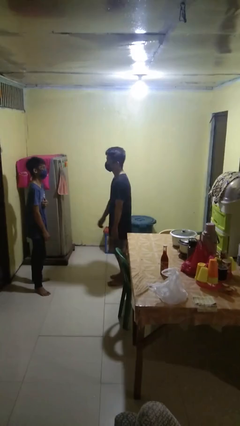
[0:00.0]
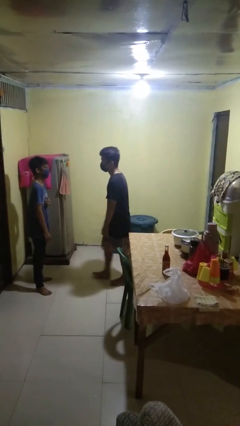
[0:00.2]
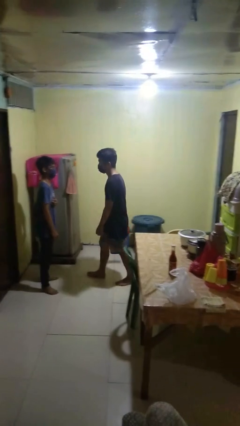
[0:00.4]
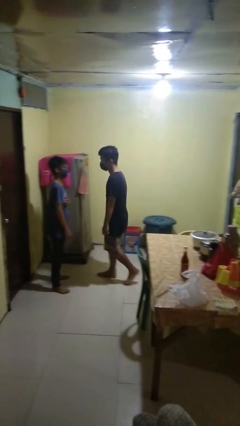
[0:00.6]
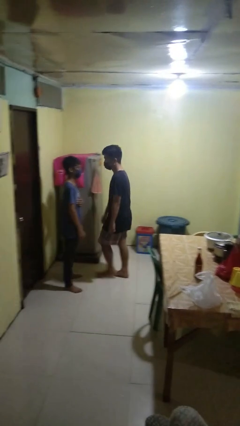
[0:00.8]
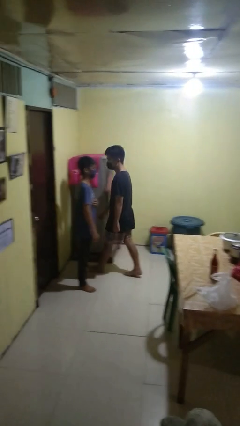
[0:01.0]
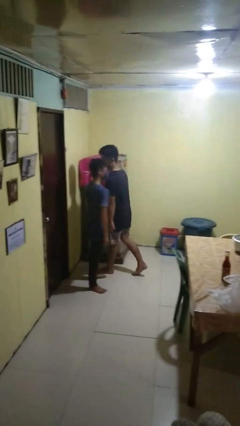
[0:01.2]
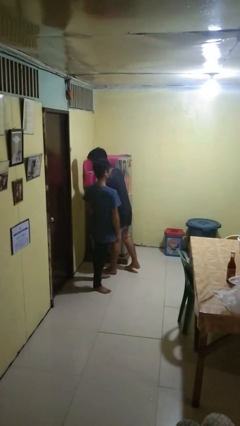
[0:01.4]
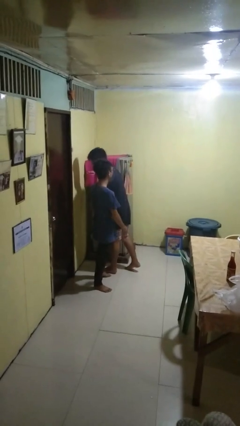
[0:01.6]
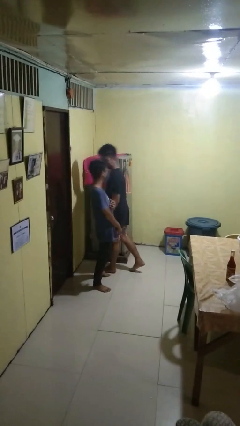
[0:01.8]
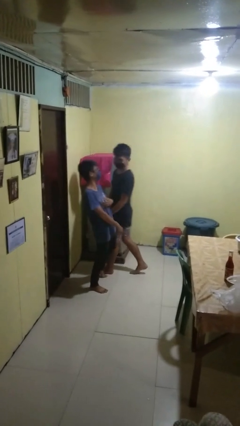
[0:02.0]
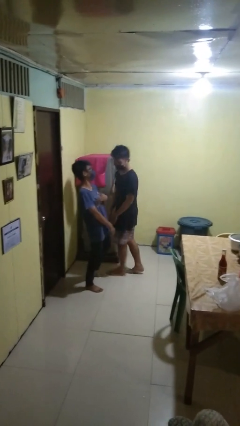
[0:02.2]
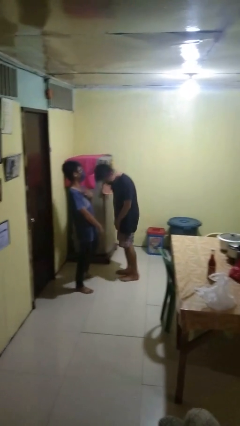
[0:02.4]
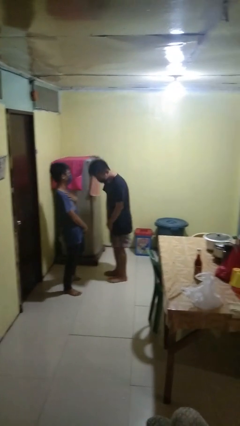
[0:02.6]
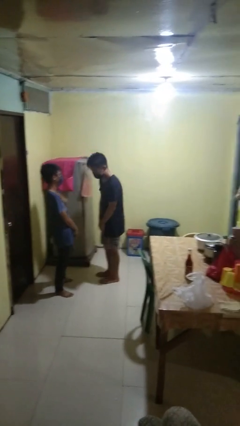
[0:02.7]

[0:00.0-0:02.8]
person bumps into person

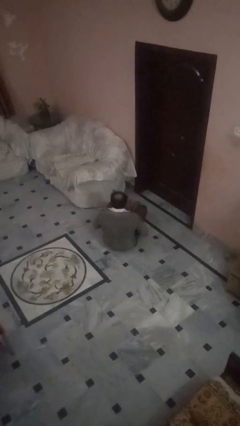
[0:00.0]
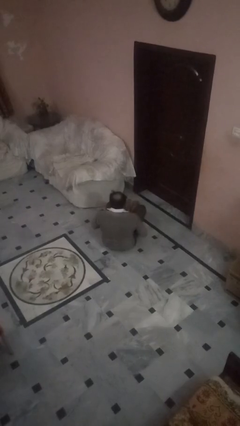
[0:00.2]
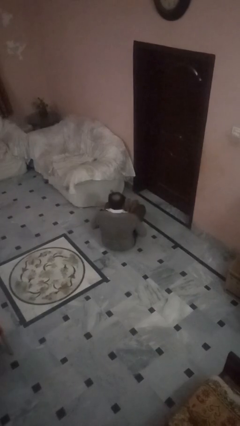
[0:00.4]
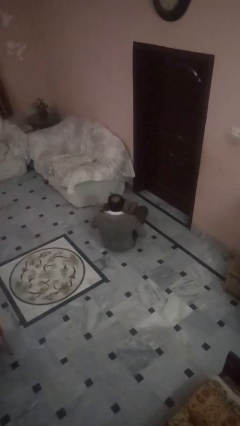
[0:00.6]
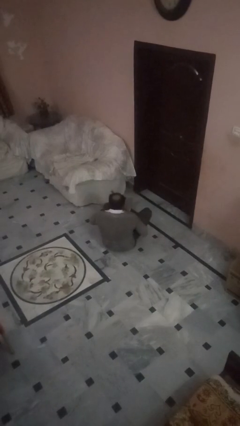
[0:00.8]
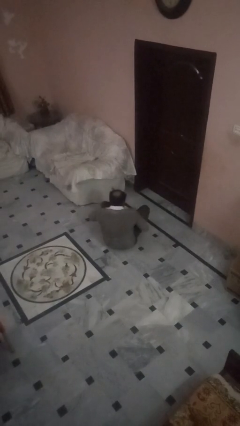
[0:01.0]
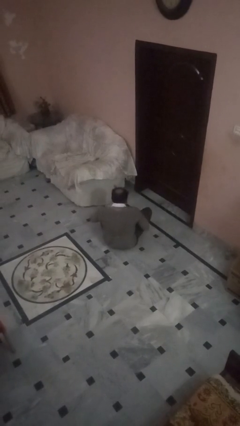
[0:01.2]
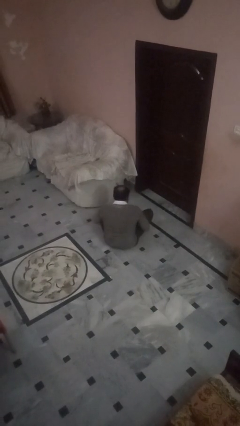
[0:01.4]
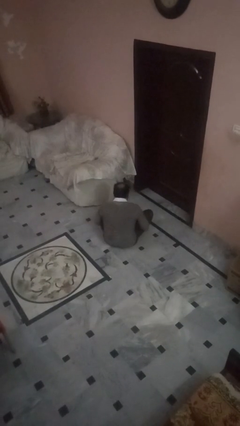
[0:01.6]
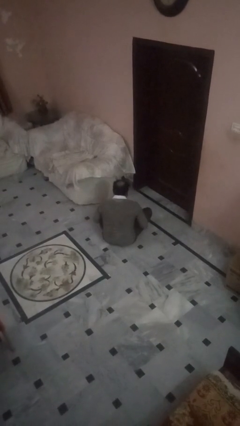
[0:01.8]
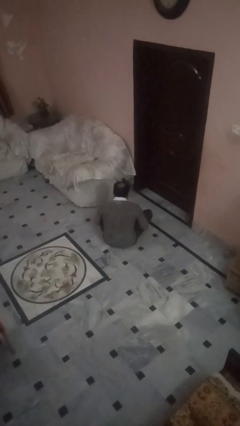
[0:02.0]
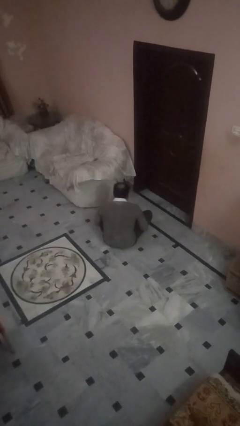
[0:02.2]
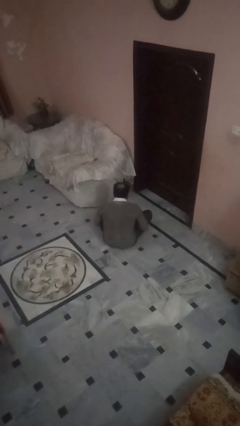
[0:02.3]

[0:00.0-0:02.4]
person crosses legs

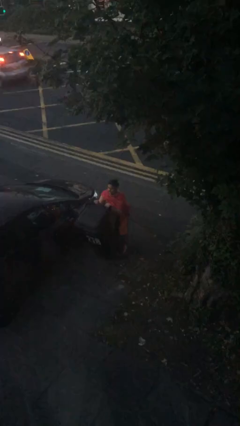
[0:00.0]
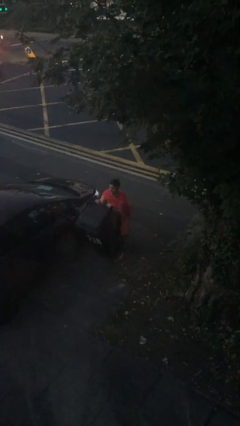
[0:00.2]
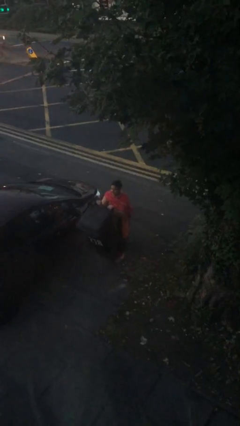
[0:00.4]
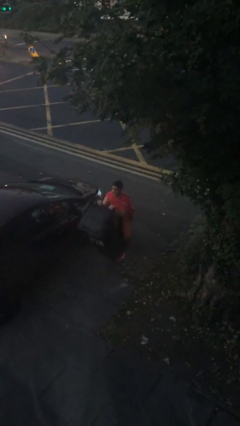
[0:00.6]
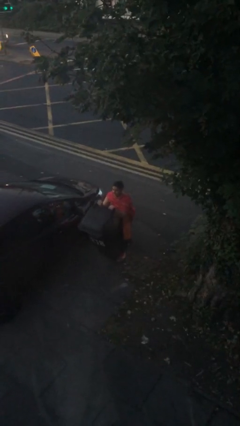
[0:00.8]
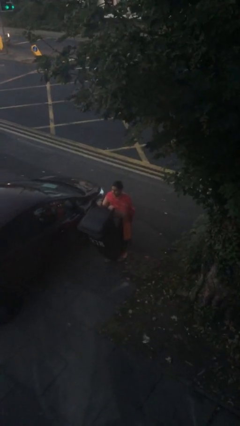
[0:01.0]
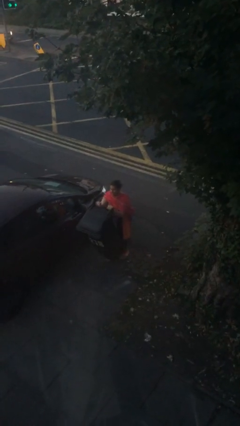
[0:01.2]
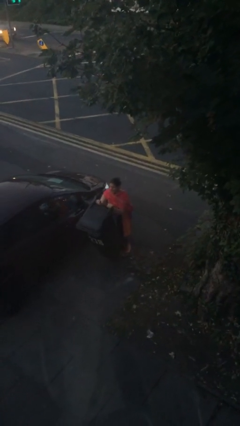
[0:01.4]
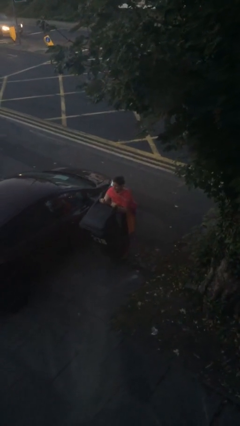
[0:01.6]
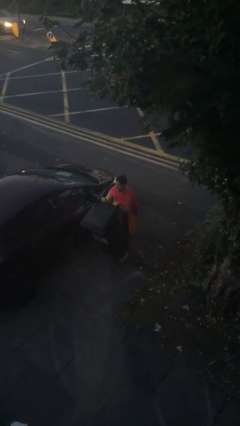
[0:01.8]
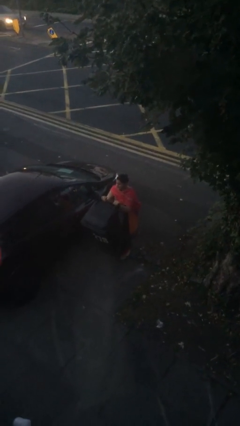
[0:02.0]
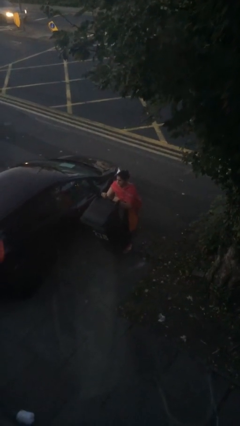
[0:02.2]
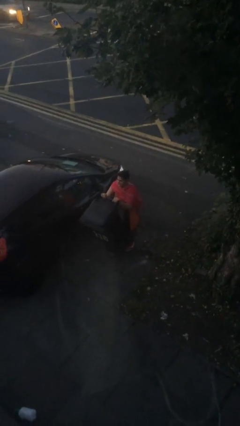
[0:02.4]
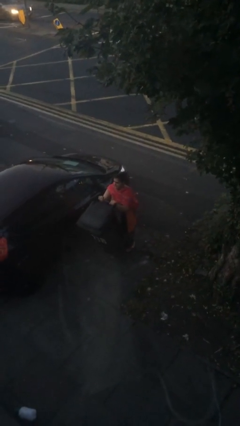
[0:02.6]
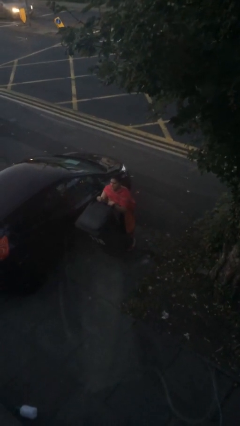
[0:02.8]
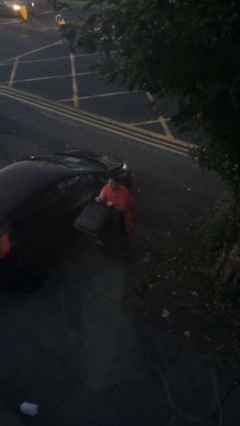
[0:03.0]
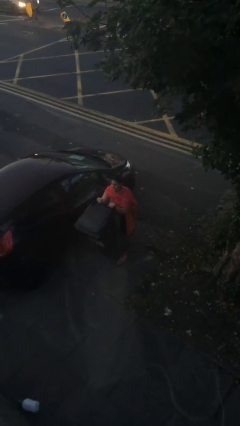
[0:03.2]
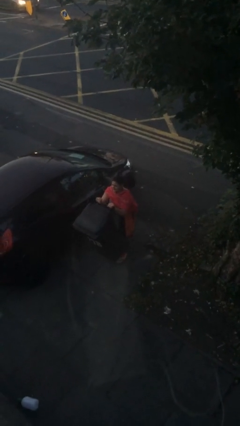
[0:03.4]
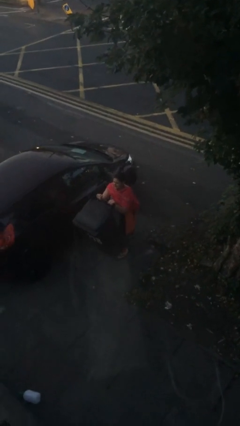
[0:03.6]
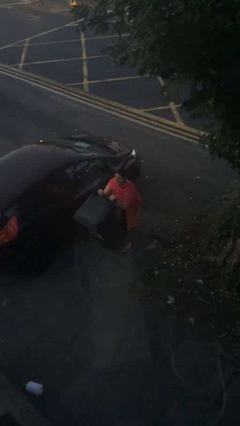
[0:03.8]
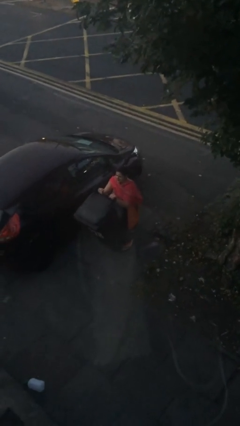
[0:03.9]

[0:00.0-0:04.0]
person carries heavy object

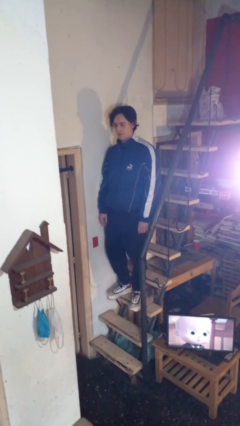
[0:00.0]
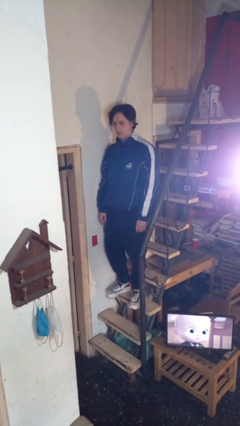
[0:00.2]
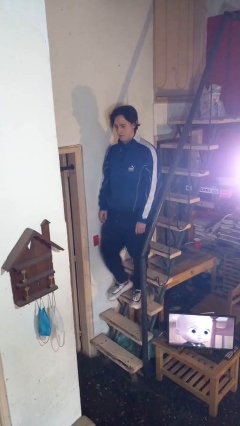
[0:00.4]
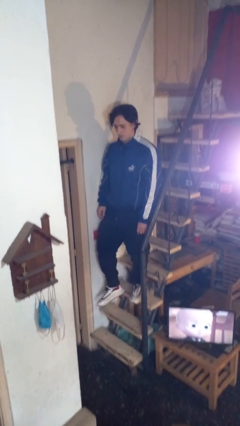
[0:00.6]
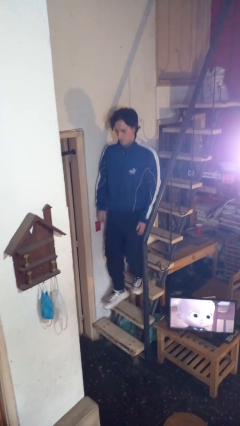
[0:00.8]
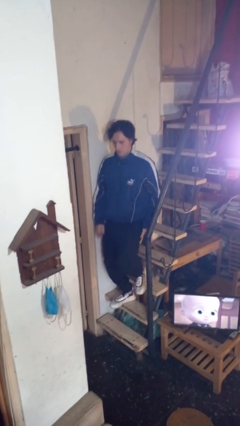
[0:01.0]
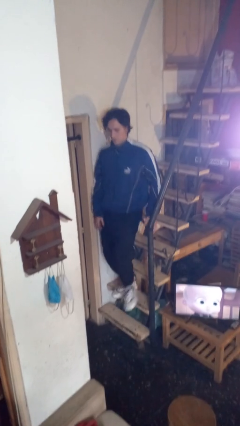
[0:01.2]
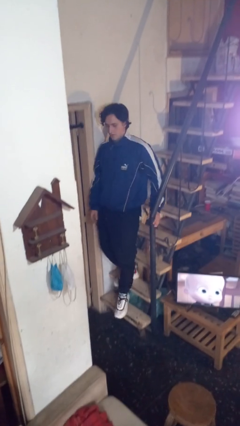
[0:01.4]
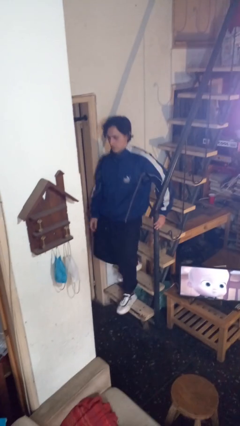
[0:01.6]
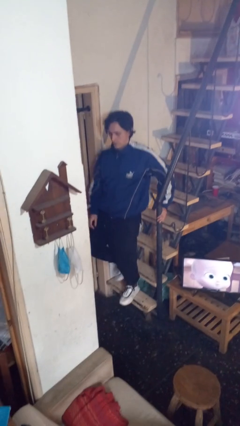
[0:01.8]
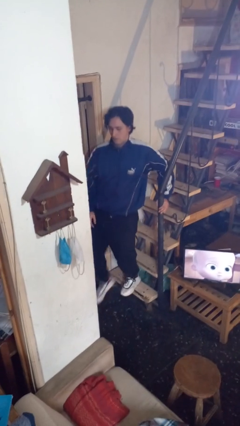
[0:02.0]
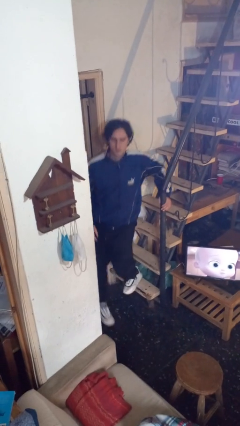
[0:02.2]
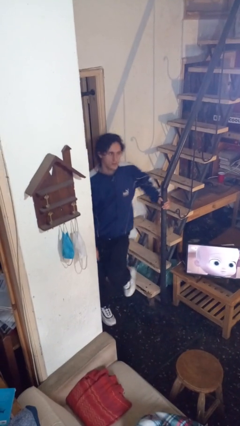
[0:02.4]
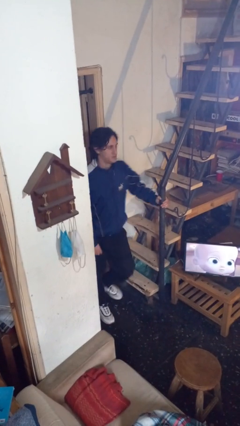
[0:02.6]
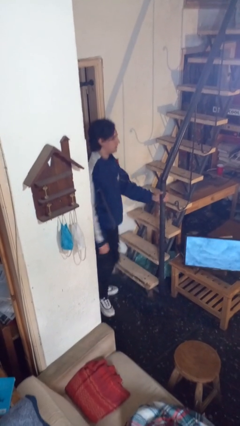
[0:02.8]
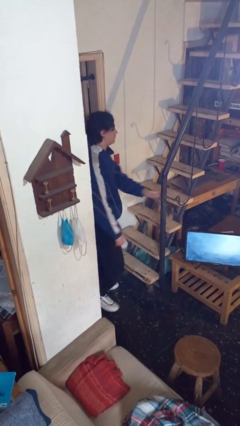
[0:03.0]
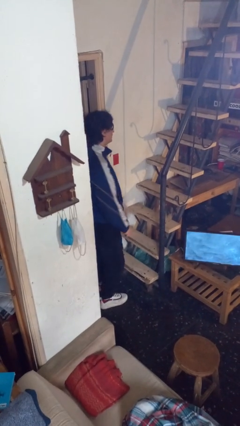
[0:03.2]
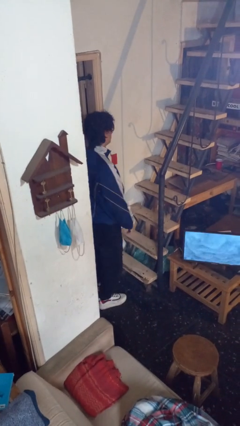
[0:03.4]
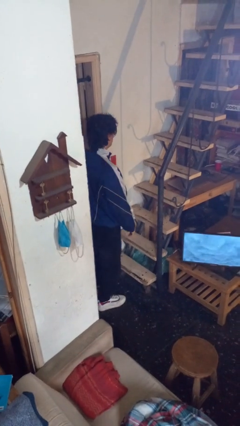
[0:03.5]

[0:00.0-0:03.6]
person climbs down stairs

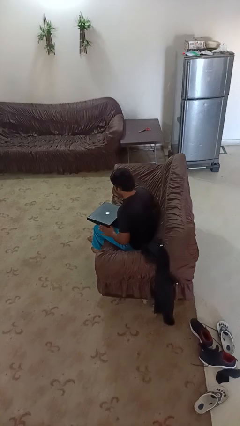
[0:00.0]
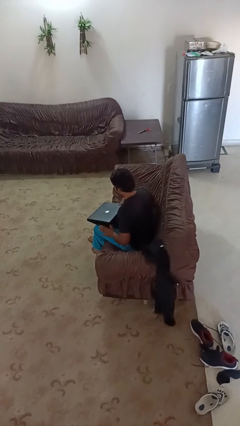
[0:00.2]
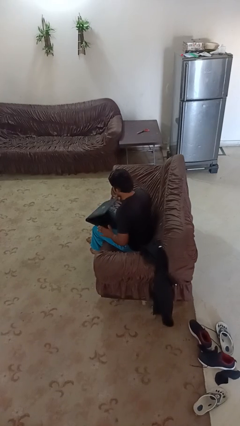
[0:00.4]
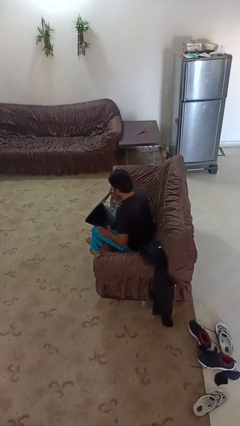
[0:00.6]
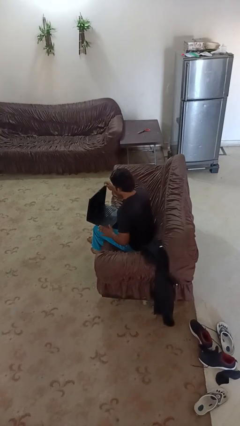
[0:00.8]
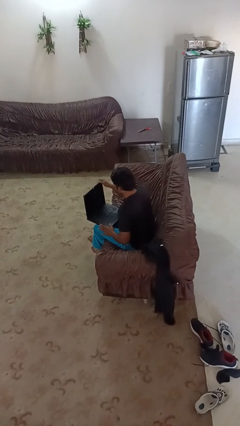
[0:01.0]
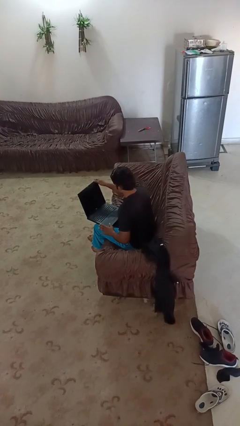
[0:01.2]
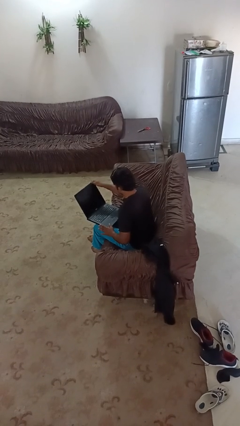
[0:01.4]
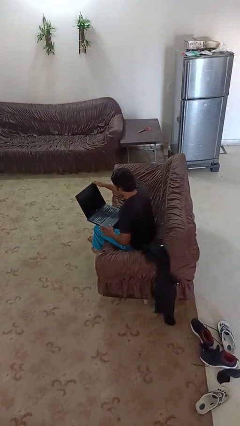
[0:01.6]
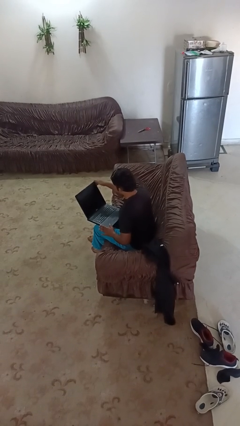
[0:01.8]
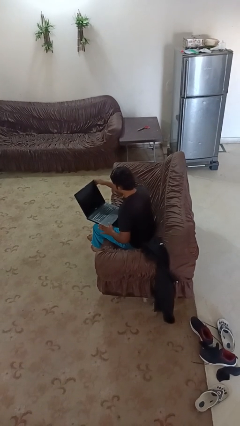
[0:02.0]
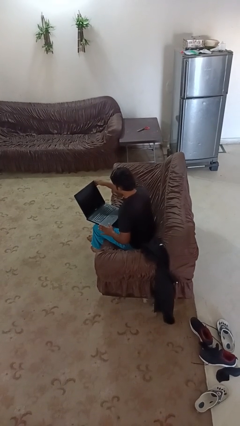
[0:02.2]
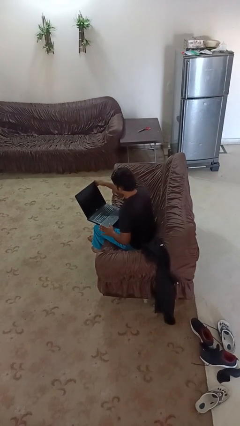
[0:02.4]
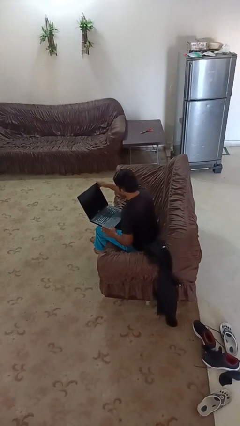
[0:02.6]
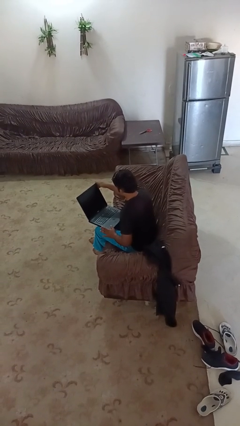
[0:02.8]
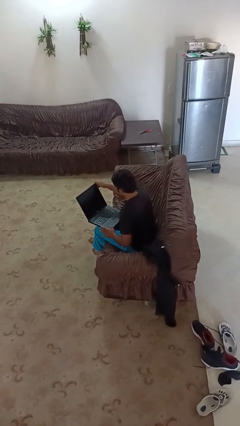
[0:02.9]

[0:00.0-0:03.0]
person opens laptop

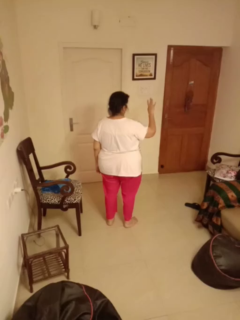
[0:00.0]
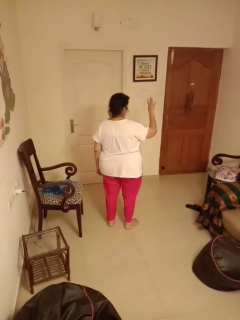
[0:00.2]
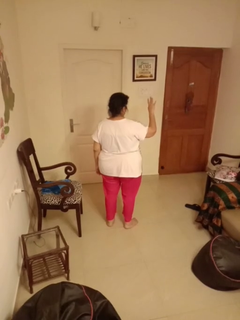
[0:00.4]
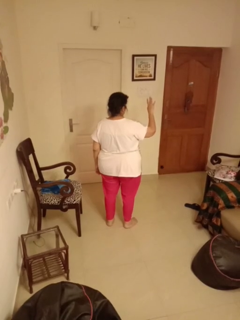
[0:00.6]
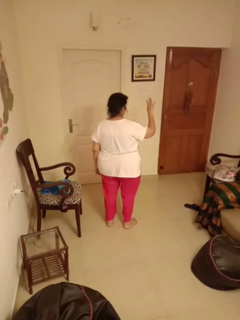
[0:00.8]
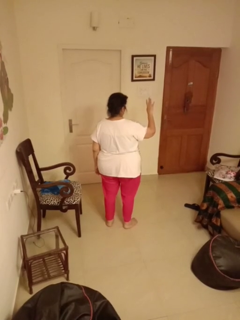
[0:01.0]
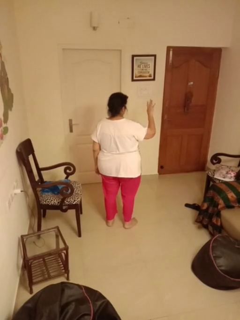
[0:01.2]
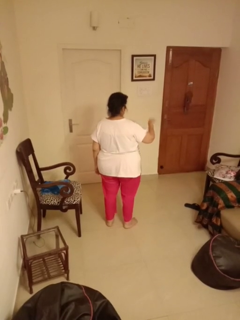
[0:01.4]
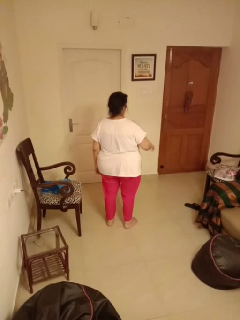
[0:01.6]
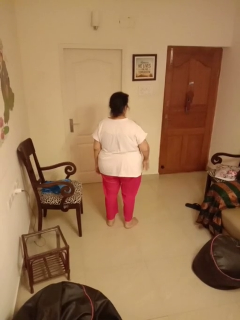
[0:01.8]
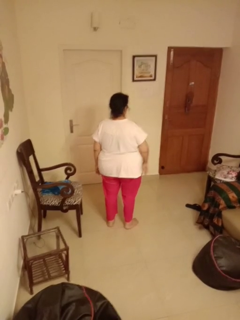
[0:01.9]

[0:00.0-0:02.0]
person gestures number four
